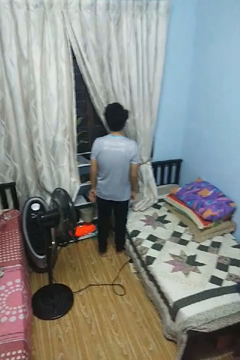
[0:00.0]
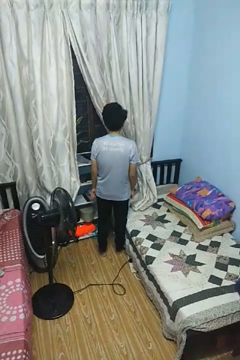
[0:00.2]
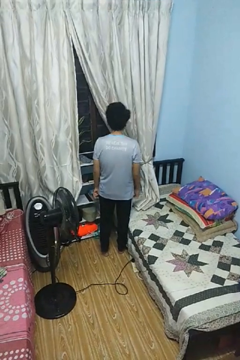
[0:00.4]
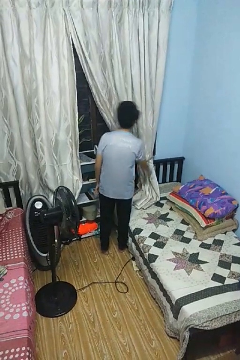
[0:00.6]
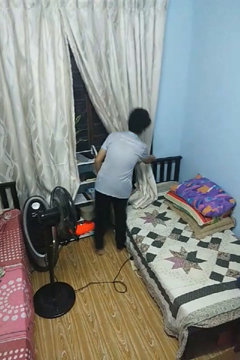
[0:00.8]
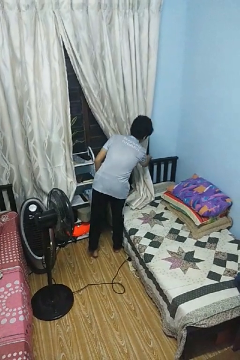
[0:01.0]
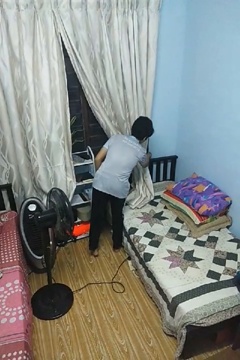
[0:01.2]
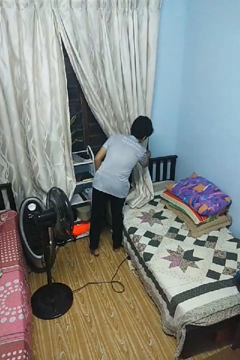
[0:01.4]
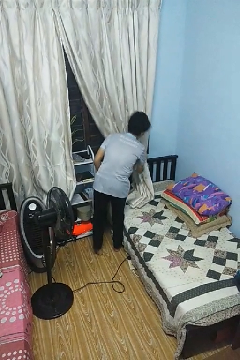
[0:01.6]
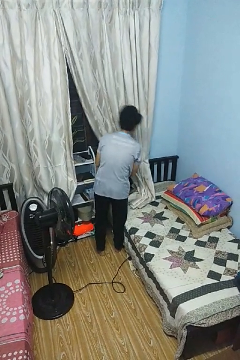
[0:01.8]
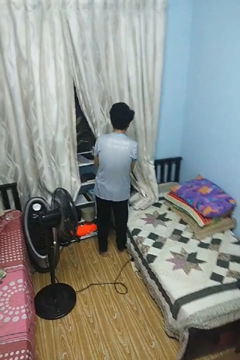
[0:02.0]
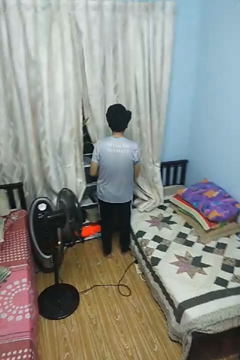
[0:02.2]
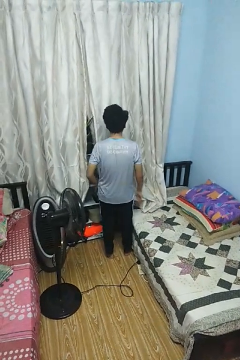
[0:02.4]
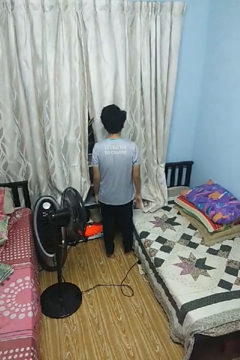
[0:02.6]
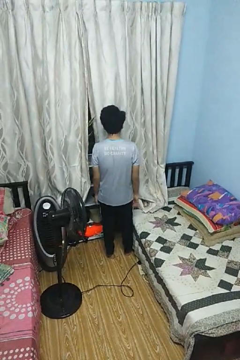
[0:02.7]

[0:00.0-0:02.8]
person closes curtains

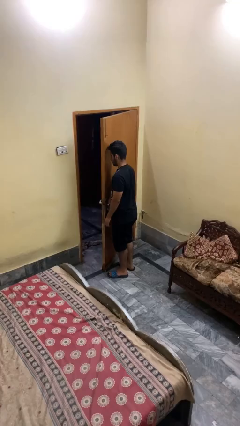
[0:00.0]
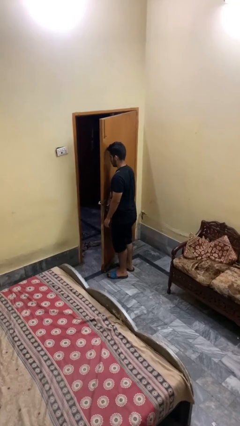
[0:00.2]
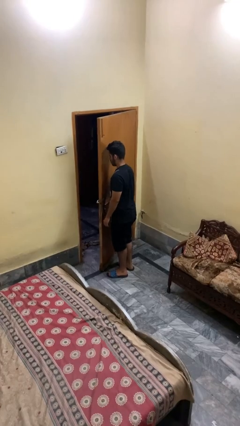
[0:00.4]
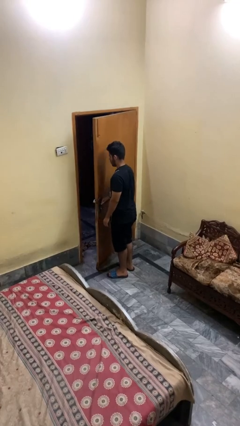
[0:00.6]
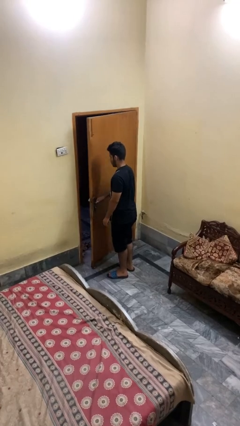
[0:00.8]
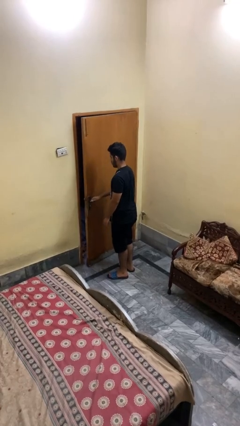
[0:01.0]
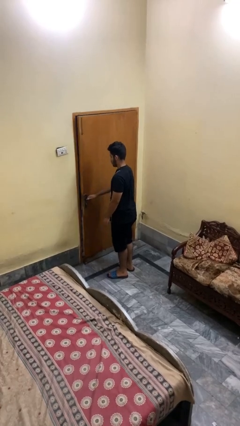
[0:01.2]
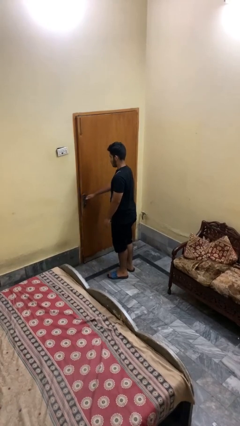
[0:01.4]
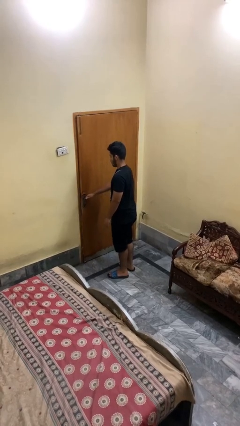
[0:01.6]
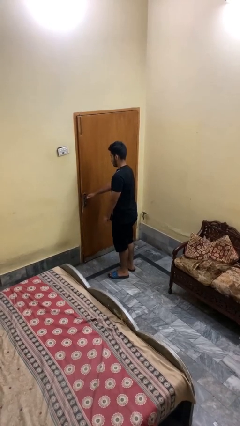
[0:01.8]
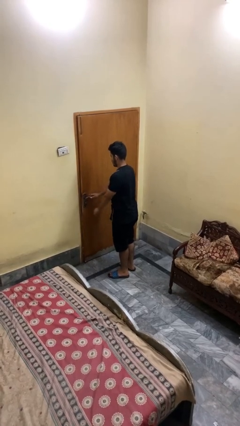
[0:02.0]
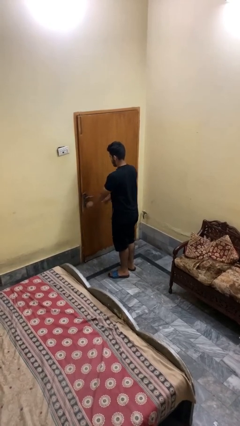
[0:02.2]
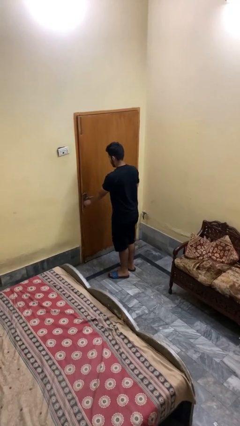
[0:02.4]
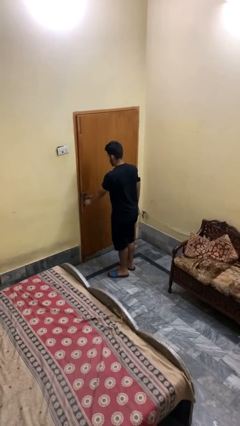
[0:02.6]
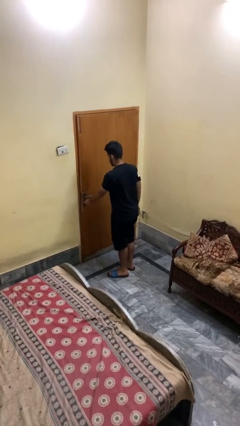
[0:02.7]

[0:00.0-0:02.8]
person closes facility door

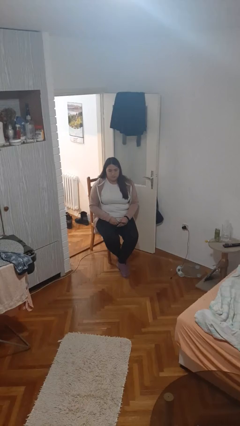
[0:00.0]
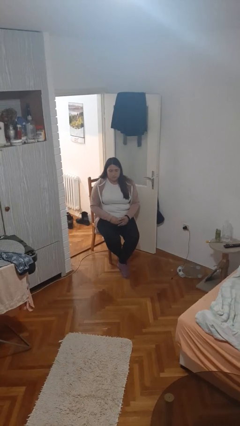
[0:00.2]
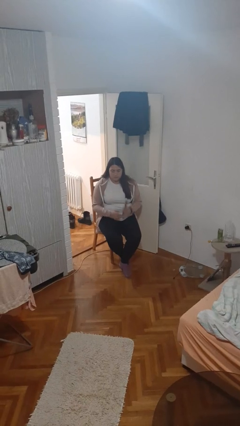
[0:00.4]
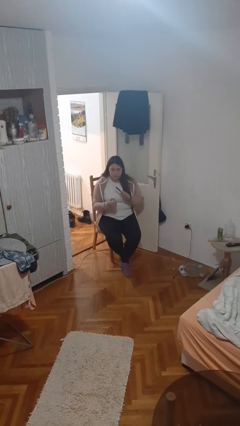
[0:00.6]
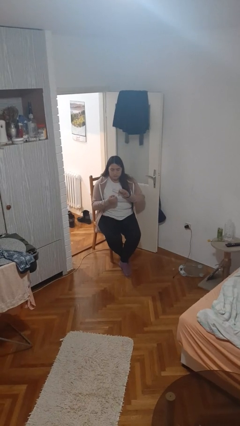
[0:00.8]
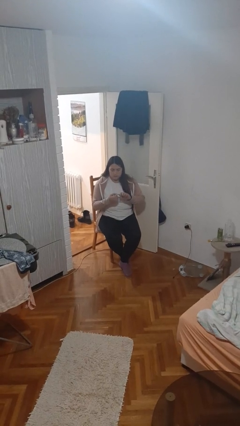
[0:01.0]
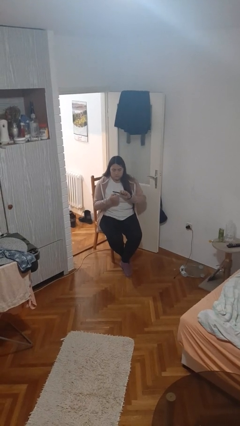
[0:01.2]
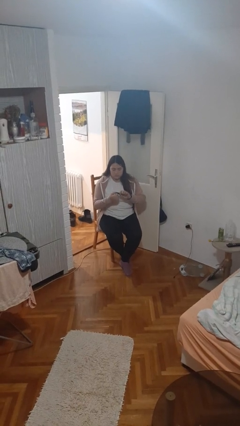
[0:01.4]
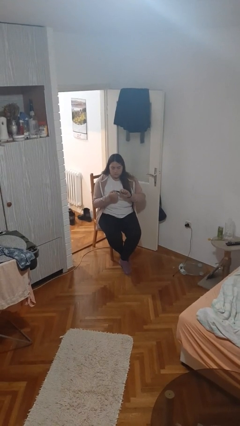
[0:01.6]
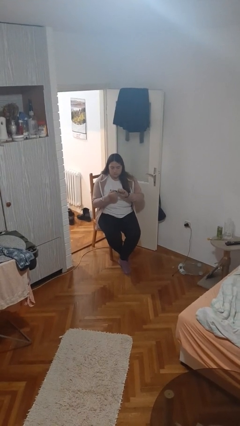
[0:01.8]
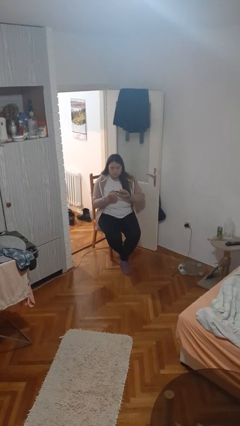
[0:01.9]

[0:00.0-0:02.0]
person files fingernails

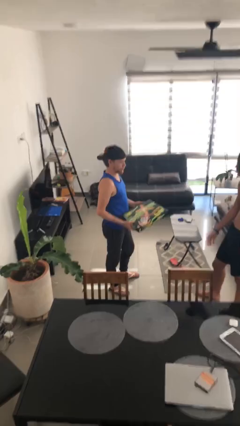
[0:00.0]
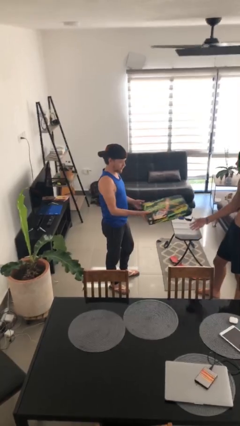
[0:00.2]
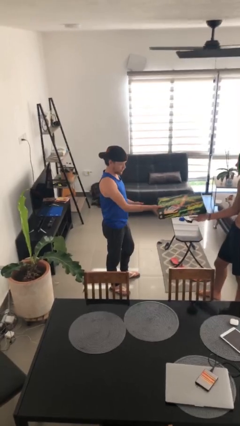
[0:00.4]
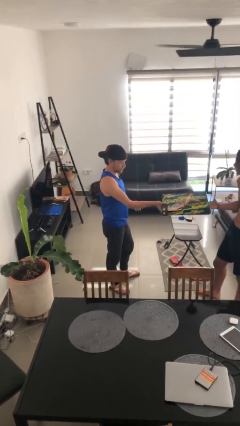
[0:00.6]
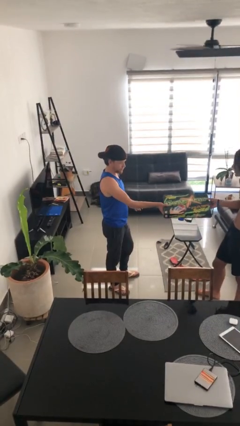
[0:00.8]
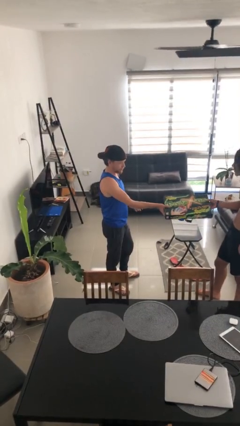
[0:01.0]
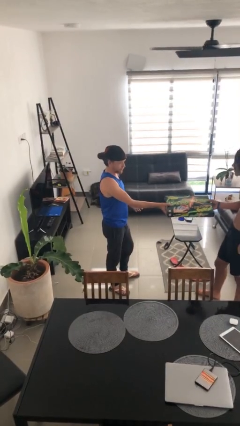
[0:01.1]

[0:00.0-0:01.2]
person transfers object to person

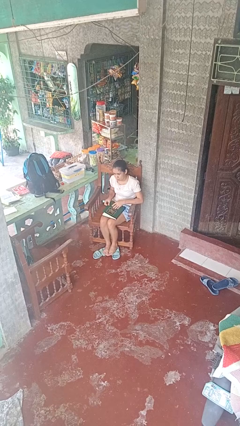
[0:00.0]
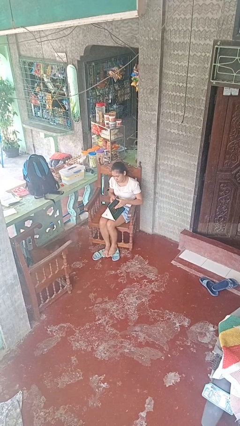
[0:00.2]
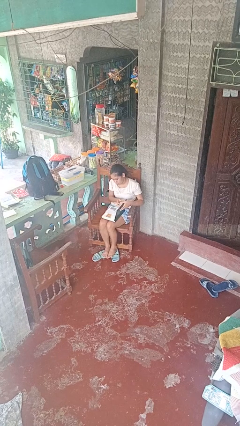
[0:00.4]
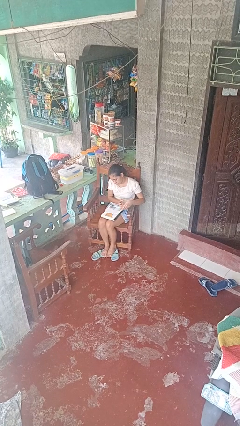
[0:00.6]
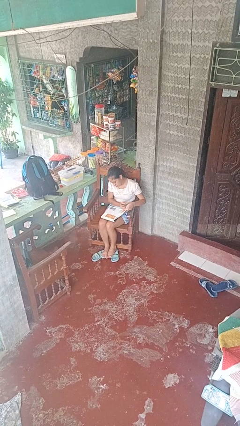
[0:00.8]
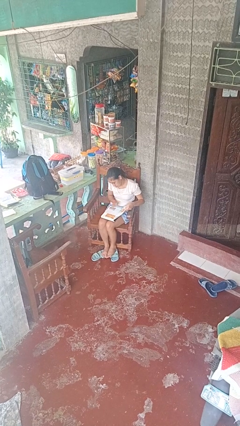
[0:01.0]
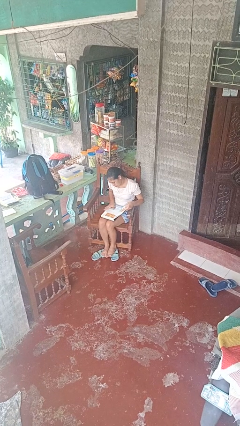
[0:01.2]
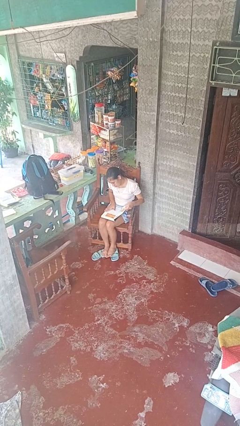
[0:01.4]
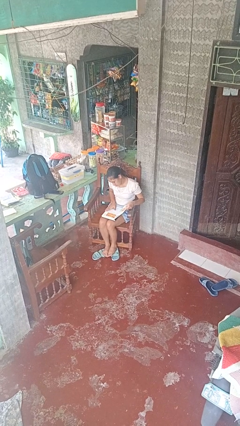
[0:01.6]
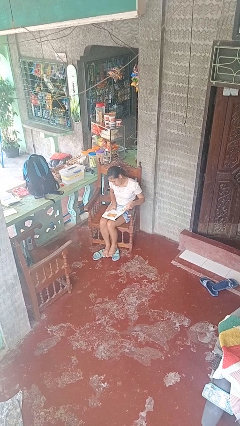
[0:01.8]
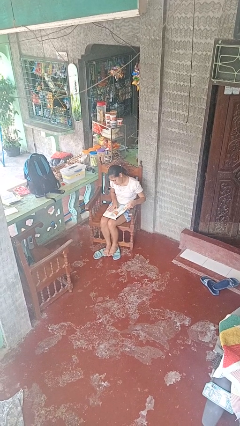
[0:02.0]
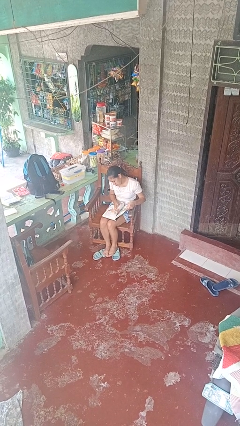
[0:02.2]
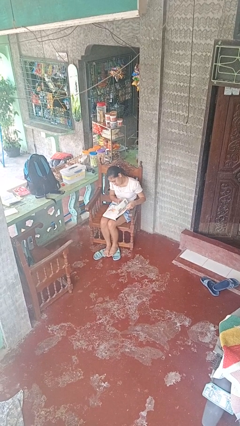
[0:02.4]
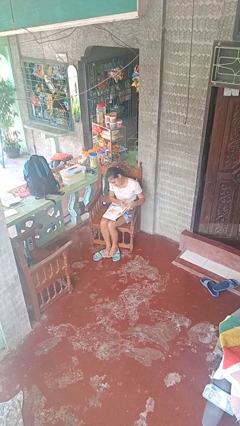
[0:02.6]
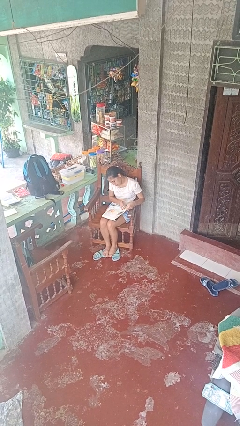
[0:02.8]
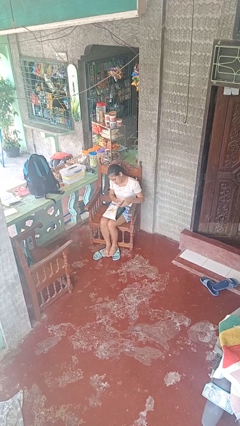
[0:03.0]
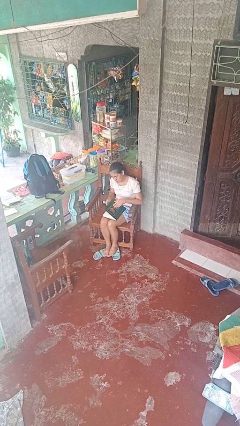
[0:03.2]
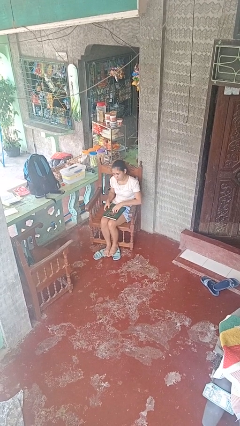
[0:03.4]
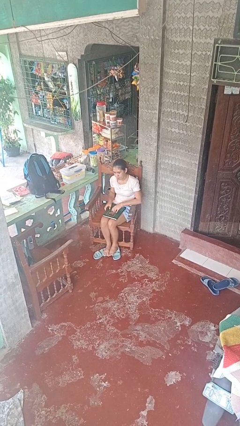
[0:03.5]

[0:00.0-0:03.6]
person reads book

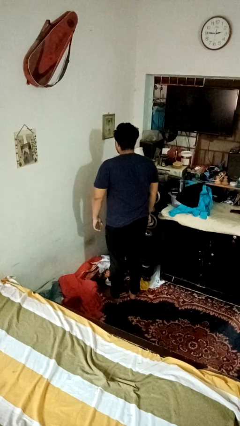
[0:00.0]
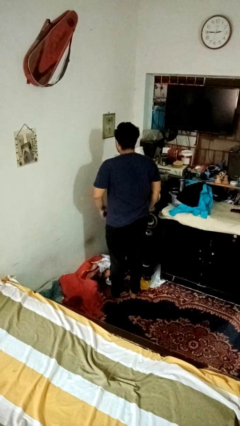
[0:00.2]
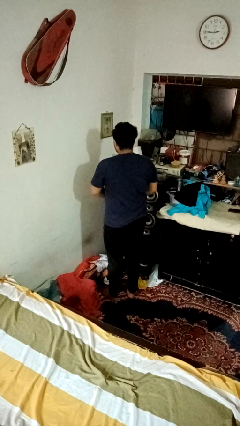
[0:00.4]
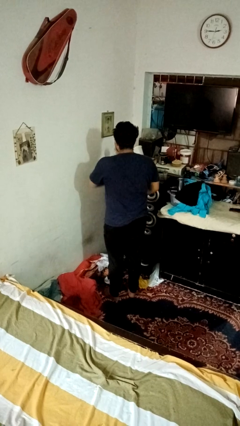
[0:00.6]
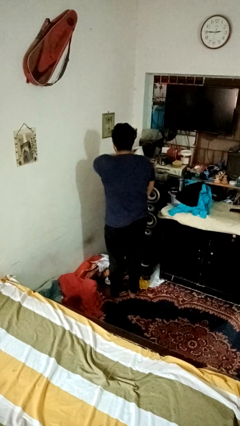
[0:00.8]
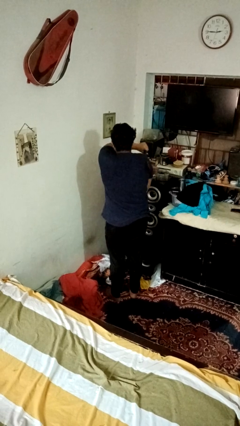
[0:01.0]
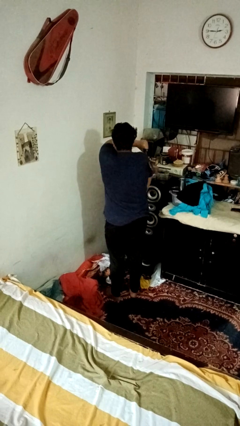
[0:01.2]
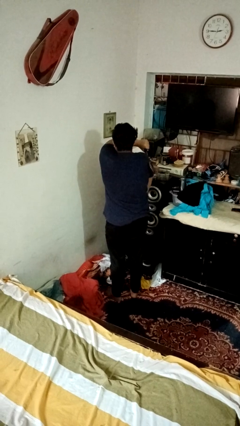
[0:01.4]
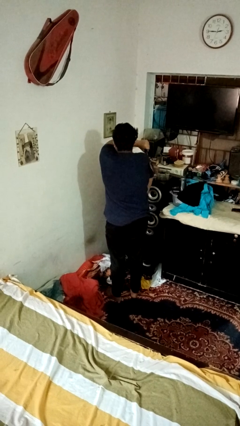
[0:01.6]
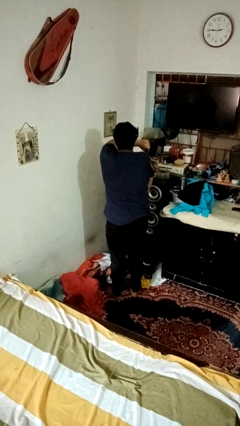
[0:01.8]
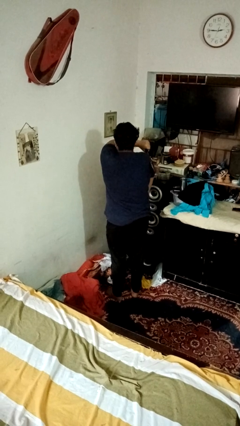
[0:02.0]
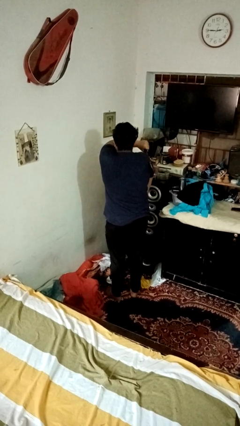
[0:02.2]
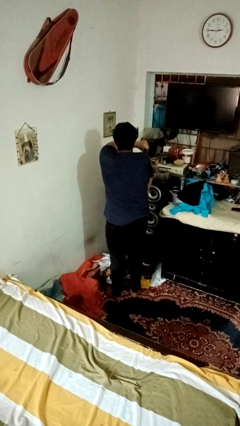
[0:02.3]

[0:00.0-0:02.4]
person swats bug

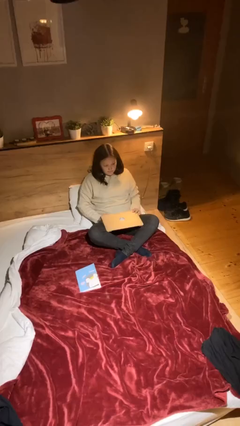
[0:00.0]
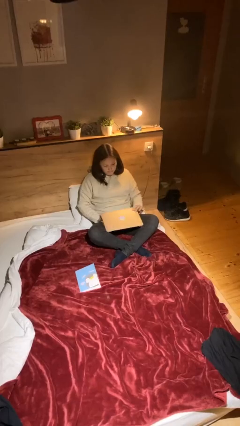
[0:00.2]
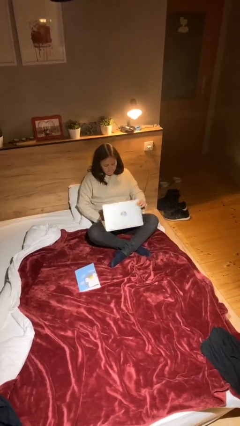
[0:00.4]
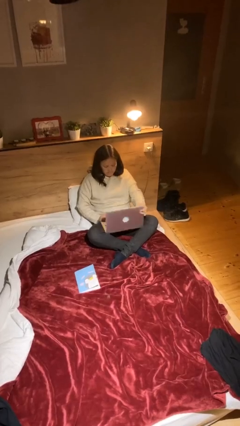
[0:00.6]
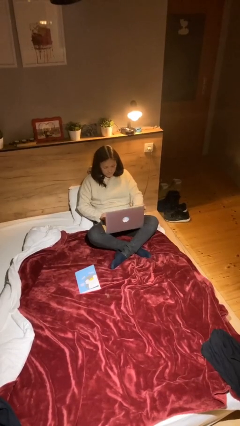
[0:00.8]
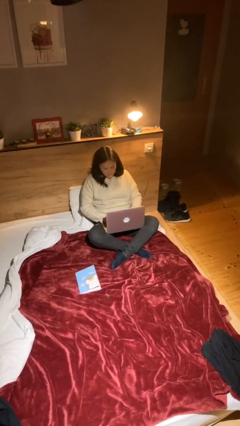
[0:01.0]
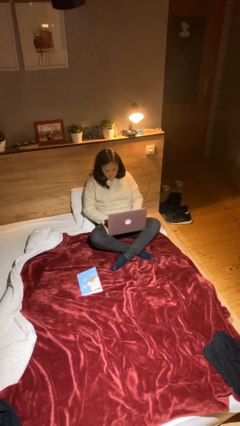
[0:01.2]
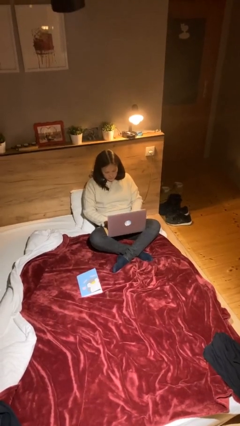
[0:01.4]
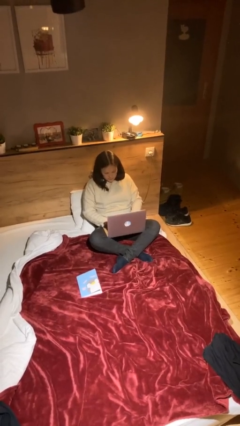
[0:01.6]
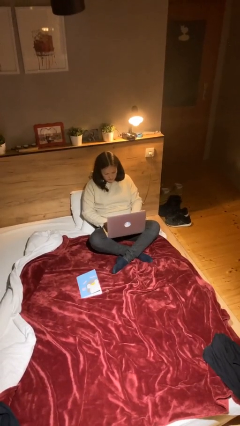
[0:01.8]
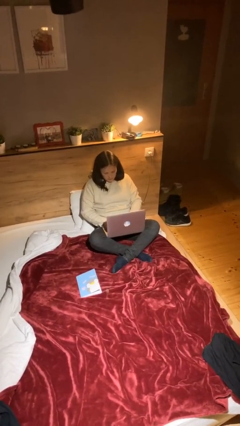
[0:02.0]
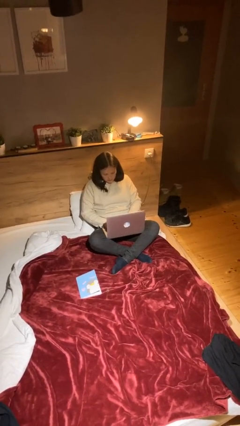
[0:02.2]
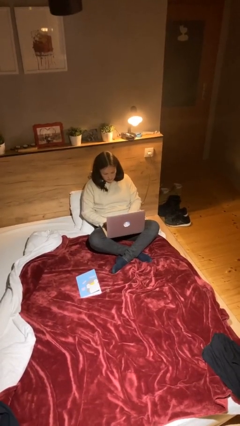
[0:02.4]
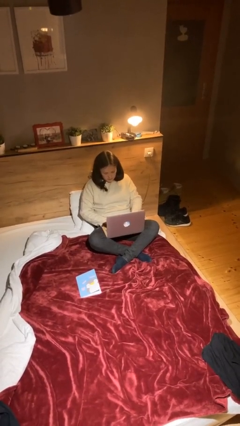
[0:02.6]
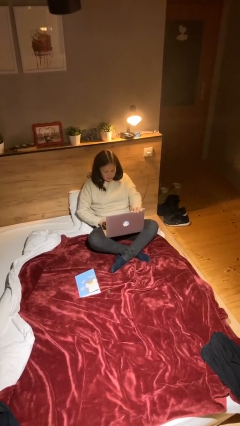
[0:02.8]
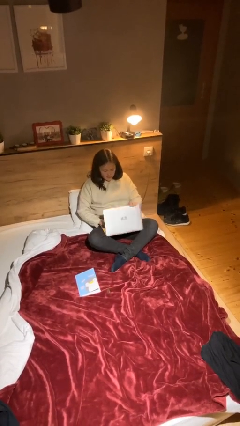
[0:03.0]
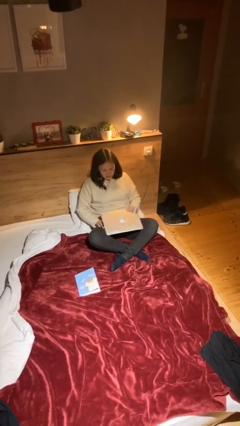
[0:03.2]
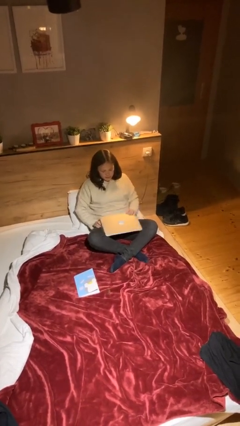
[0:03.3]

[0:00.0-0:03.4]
person interacts with laptop
